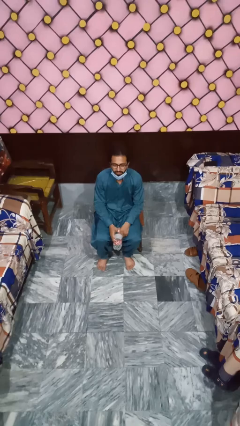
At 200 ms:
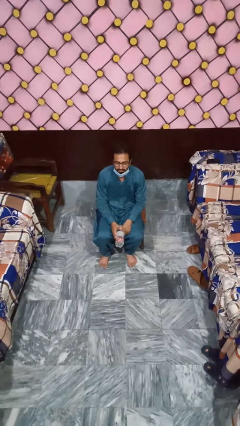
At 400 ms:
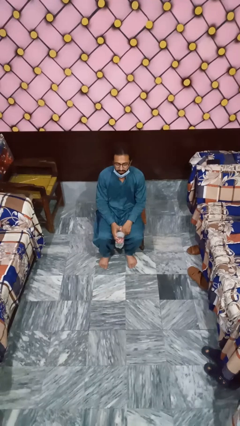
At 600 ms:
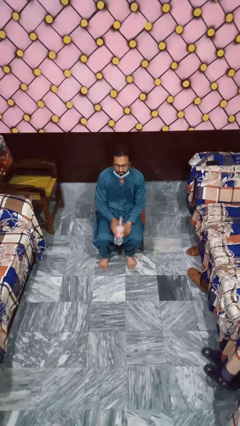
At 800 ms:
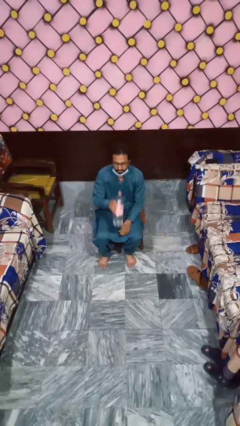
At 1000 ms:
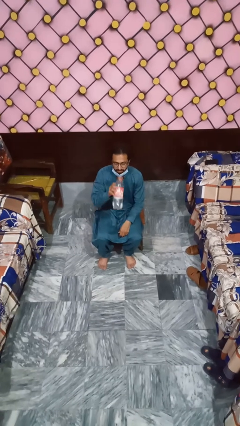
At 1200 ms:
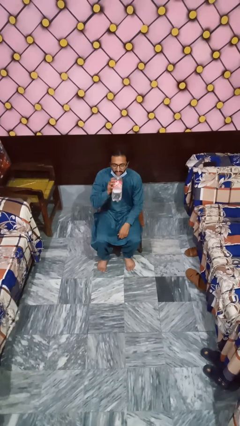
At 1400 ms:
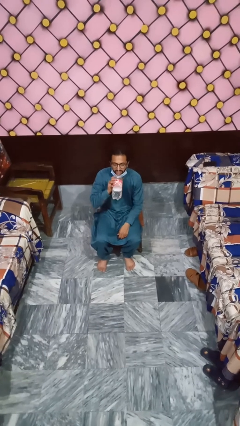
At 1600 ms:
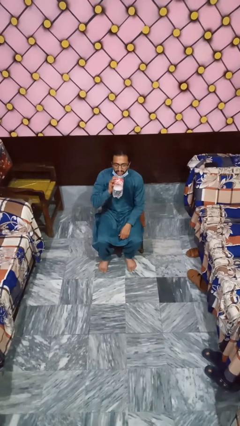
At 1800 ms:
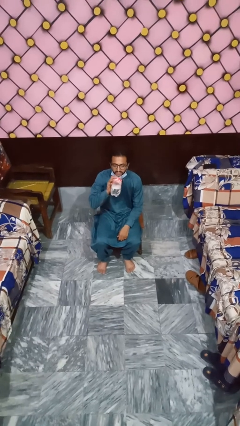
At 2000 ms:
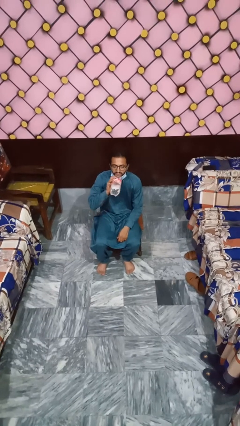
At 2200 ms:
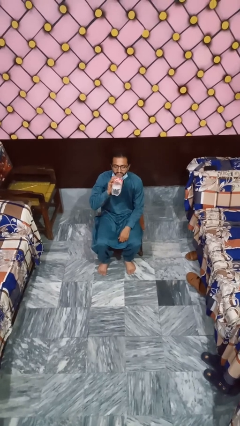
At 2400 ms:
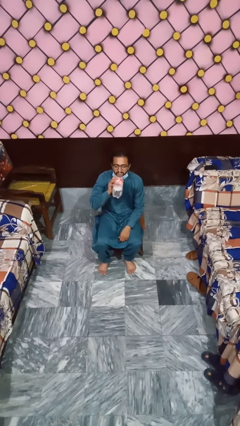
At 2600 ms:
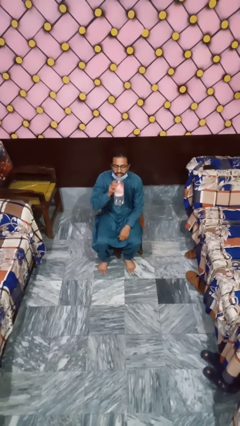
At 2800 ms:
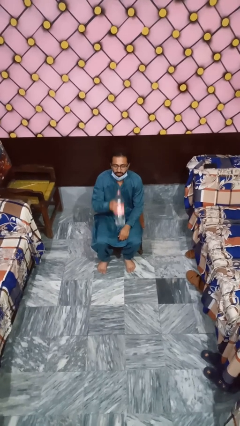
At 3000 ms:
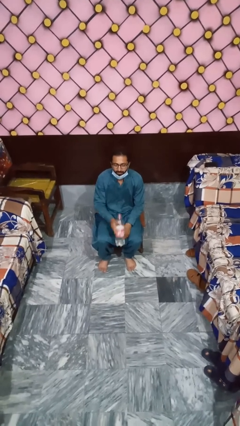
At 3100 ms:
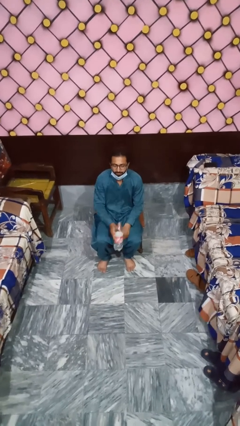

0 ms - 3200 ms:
person drinks from bottle

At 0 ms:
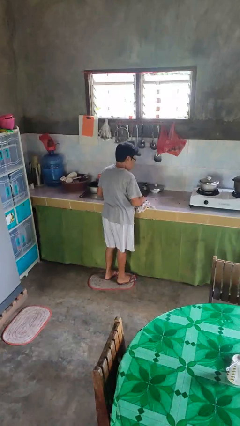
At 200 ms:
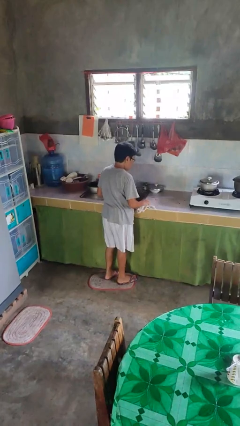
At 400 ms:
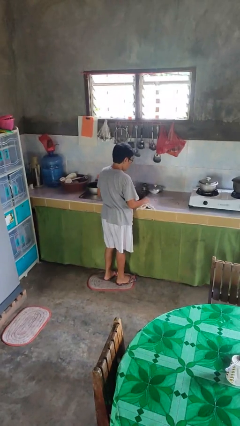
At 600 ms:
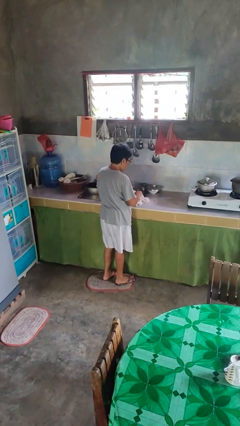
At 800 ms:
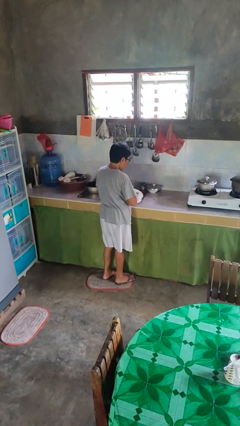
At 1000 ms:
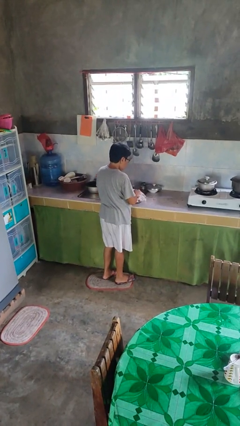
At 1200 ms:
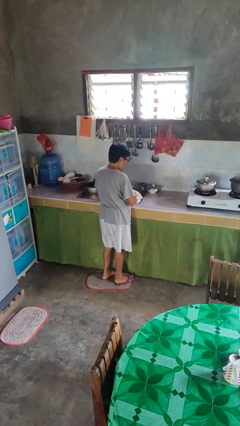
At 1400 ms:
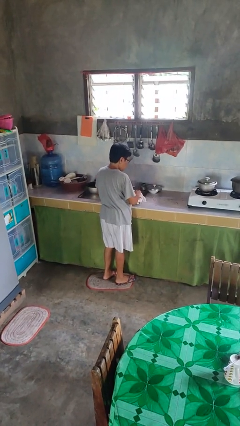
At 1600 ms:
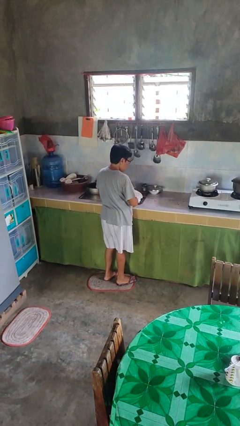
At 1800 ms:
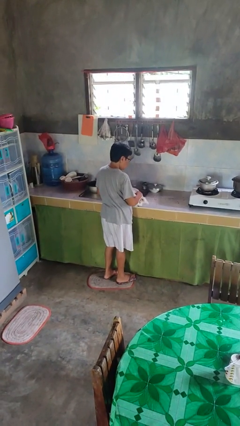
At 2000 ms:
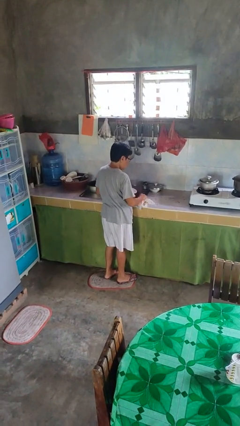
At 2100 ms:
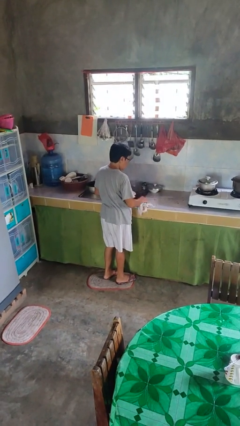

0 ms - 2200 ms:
person dries dish

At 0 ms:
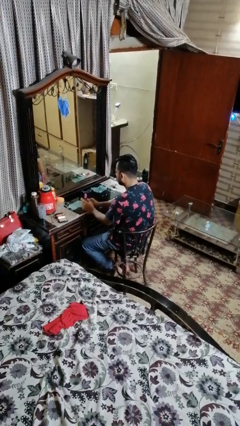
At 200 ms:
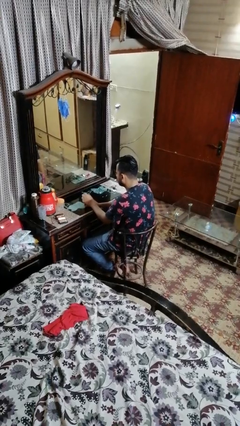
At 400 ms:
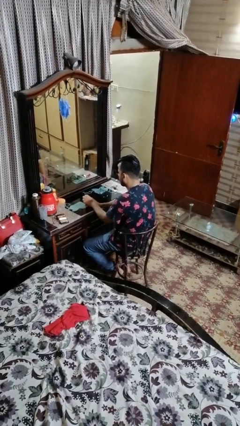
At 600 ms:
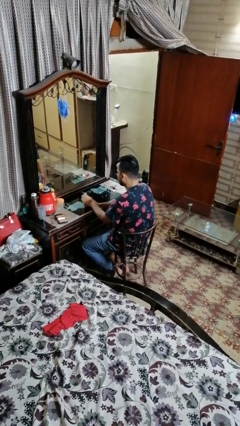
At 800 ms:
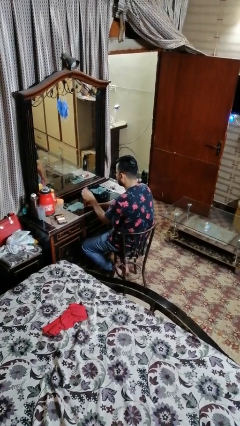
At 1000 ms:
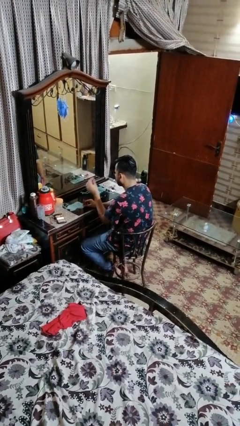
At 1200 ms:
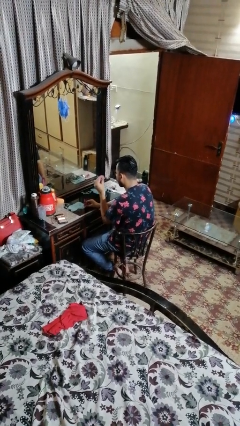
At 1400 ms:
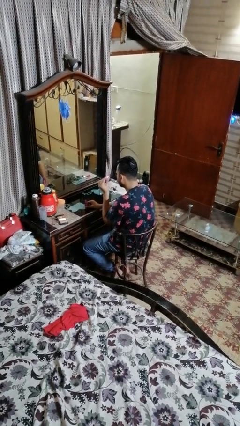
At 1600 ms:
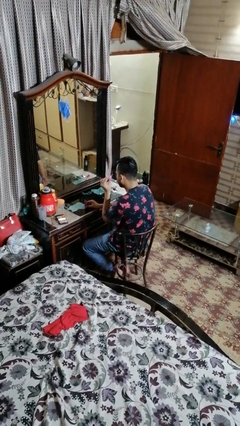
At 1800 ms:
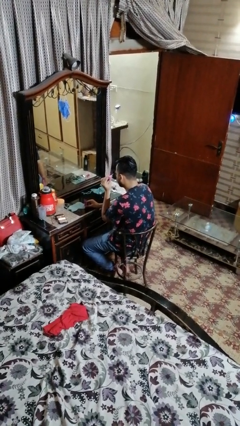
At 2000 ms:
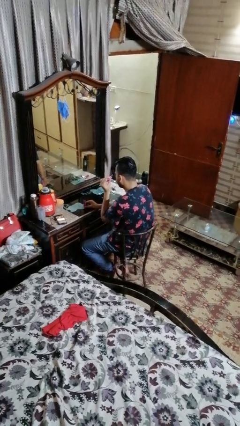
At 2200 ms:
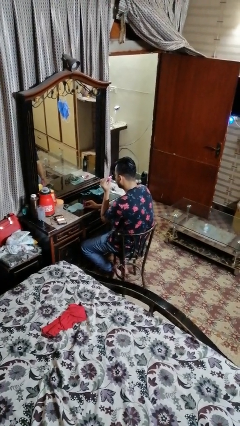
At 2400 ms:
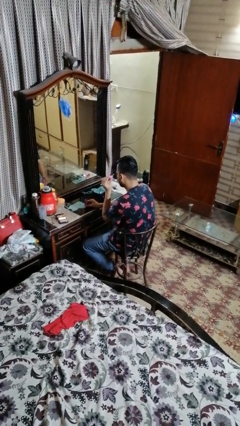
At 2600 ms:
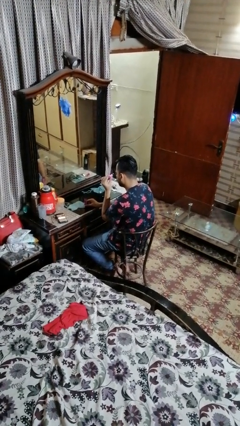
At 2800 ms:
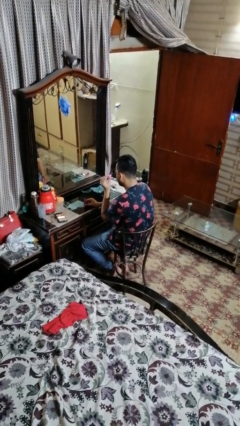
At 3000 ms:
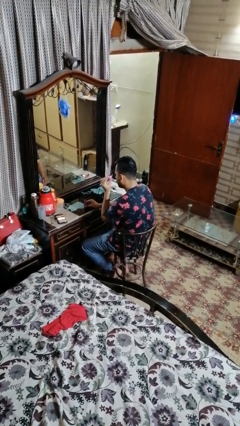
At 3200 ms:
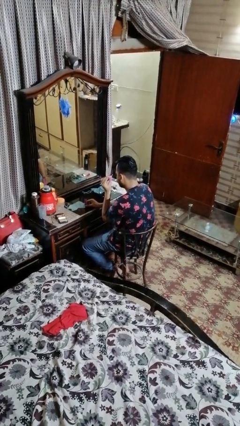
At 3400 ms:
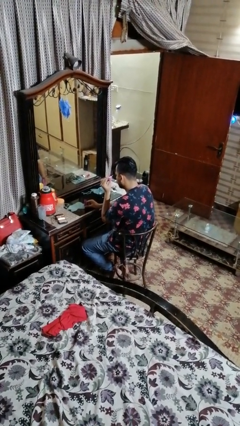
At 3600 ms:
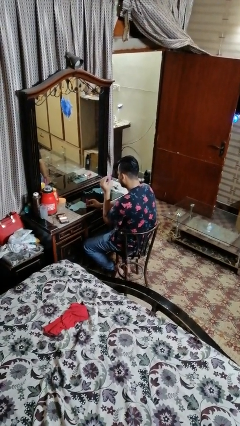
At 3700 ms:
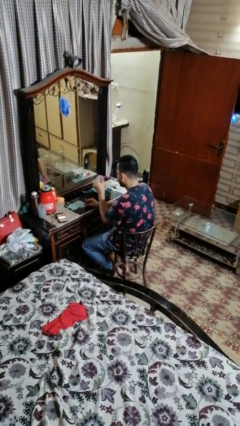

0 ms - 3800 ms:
person applies eye makeup

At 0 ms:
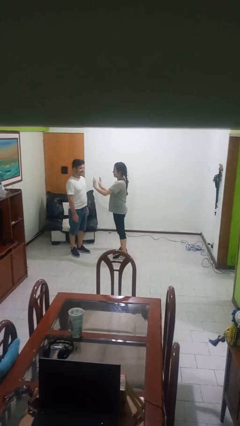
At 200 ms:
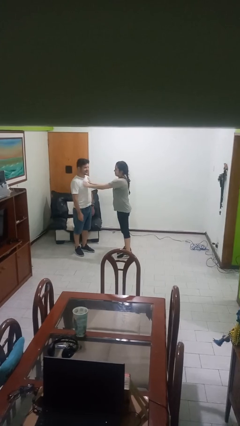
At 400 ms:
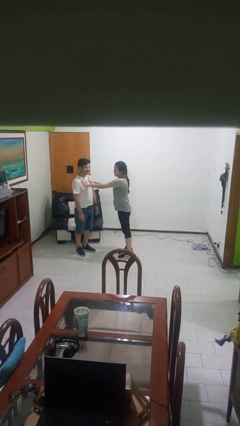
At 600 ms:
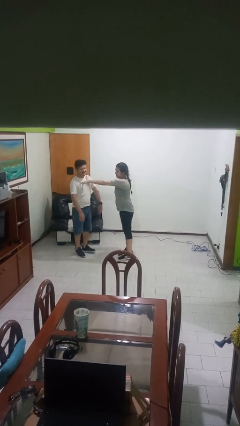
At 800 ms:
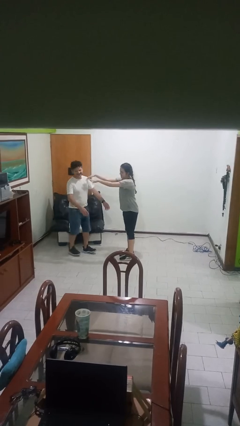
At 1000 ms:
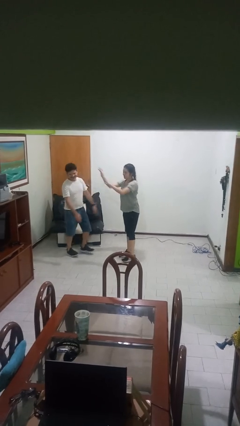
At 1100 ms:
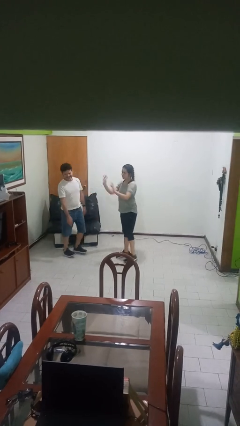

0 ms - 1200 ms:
person shoves person

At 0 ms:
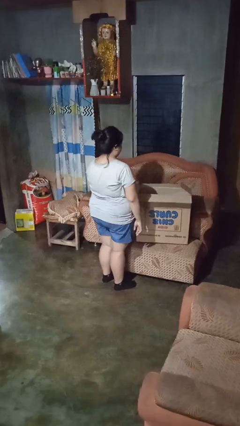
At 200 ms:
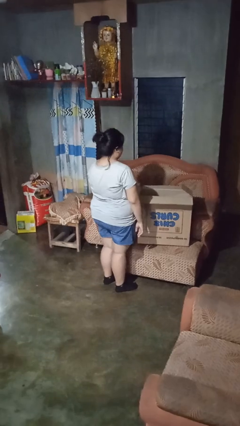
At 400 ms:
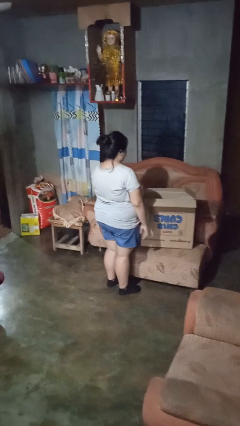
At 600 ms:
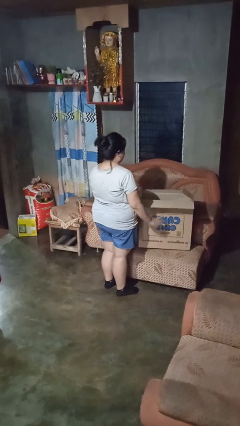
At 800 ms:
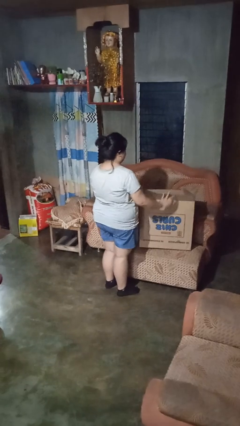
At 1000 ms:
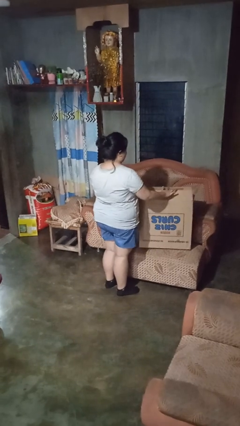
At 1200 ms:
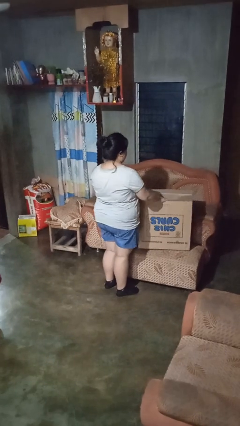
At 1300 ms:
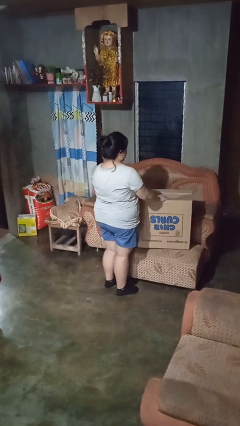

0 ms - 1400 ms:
person closes box

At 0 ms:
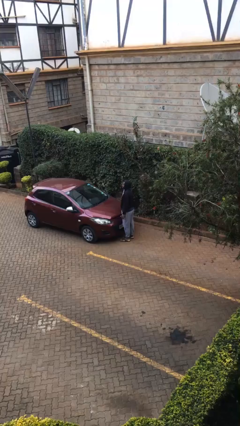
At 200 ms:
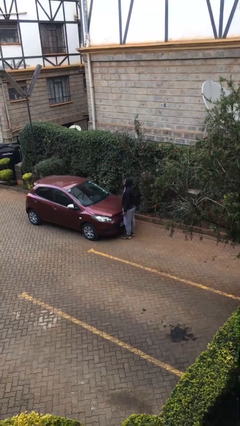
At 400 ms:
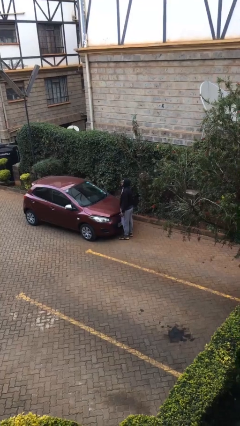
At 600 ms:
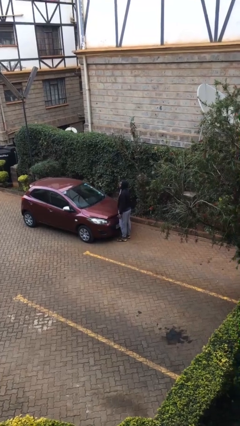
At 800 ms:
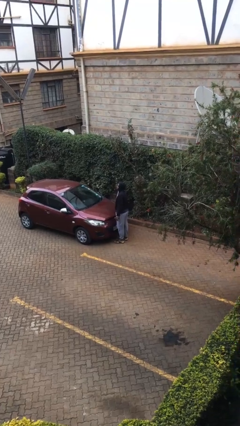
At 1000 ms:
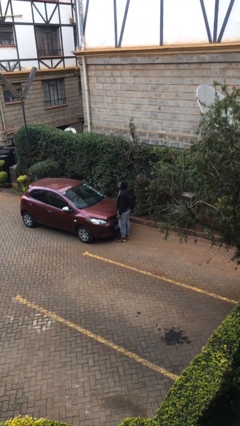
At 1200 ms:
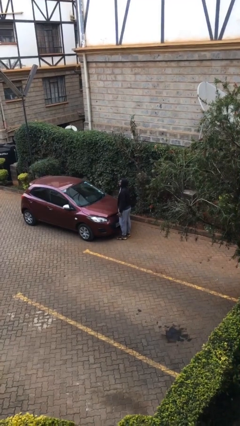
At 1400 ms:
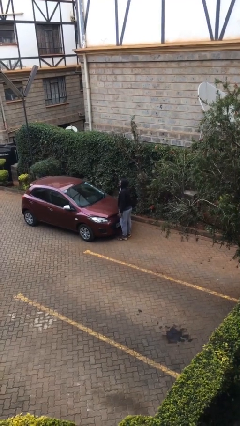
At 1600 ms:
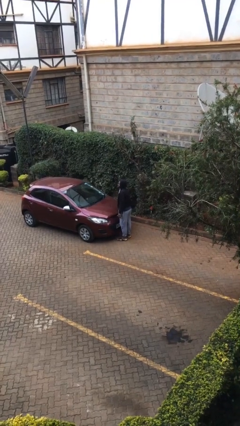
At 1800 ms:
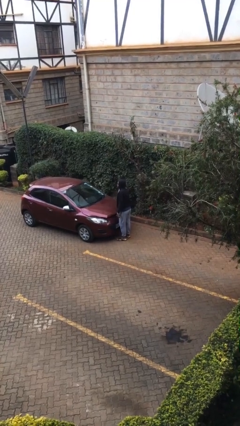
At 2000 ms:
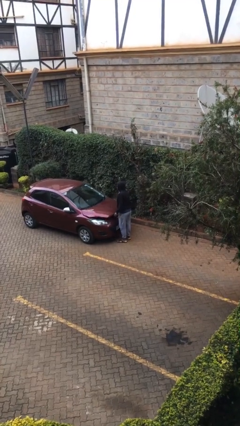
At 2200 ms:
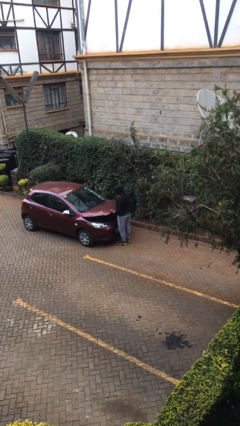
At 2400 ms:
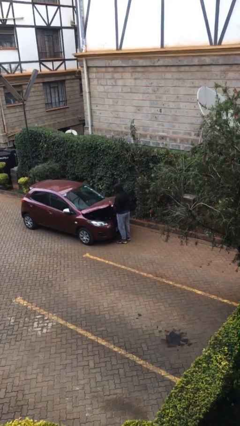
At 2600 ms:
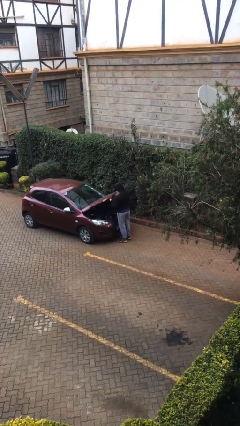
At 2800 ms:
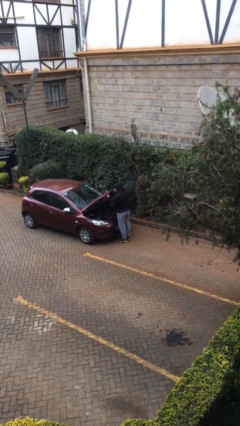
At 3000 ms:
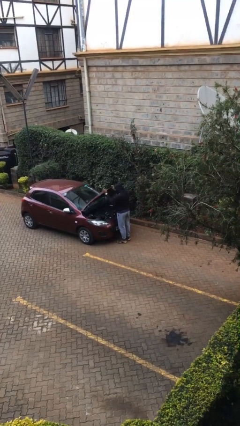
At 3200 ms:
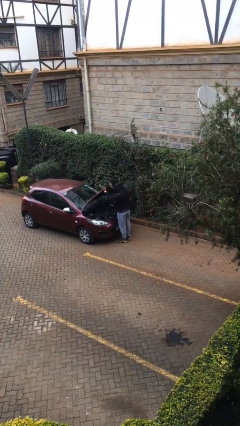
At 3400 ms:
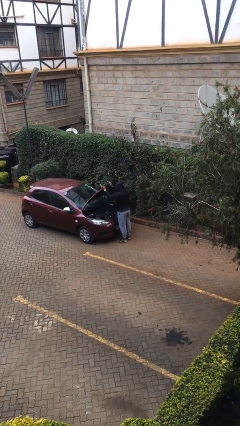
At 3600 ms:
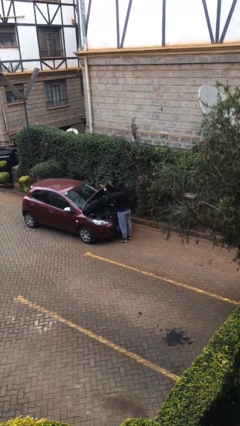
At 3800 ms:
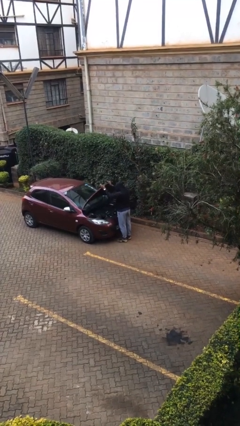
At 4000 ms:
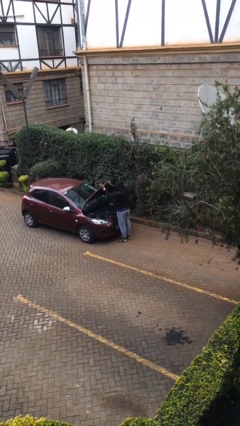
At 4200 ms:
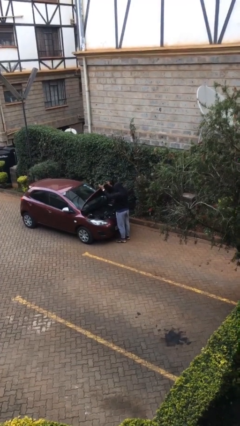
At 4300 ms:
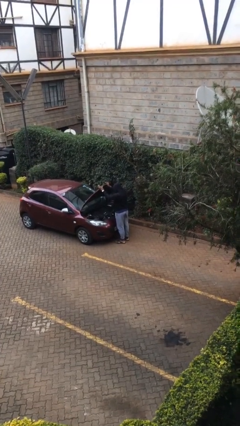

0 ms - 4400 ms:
person opens car hood

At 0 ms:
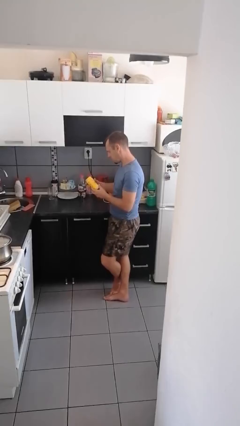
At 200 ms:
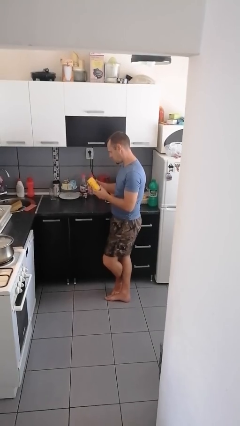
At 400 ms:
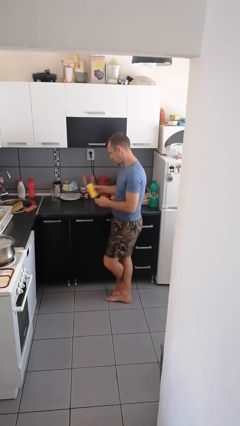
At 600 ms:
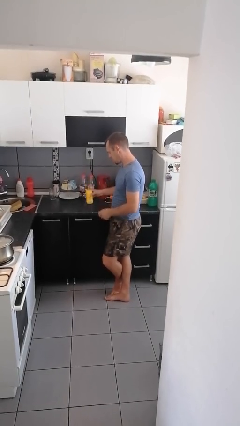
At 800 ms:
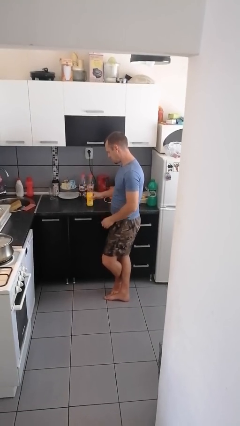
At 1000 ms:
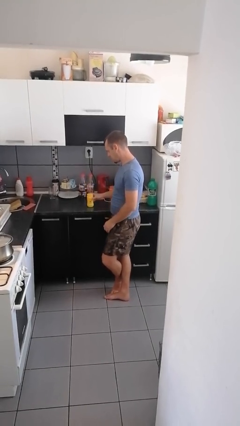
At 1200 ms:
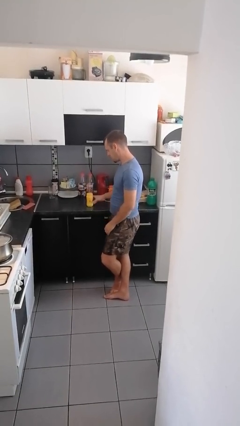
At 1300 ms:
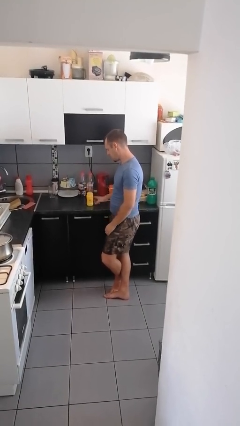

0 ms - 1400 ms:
person puts down object on countertop
